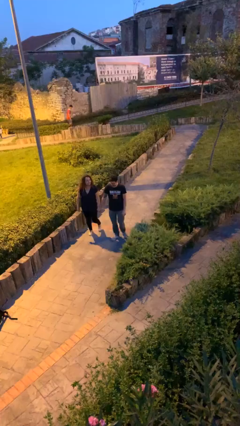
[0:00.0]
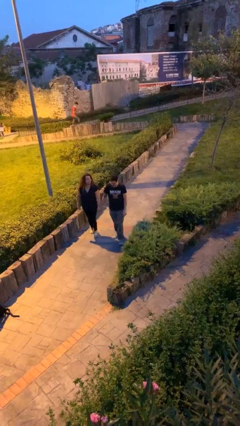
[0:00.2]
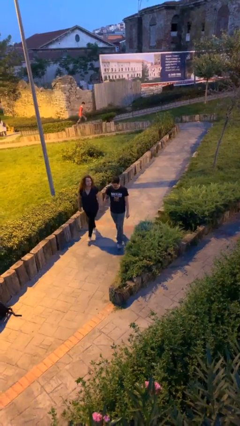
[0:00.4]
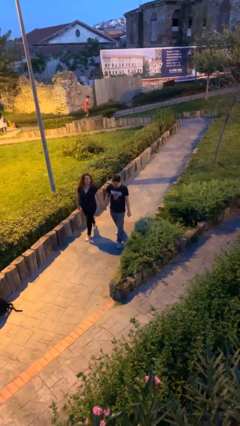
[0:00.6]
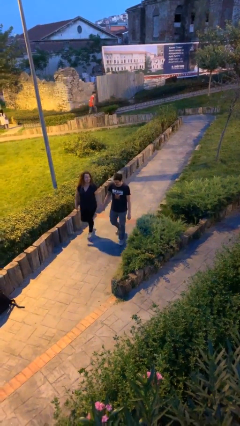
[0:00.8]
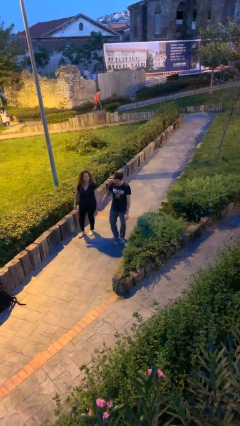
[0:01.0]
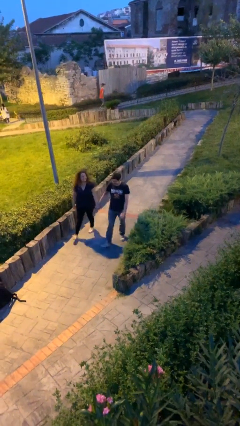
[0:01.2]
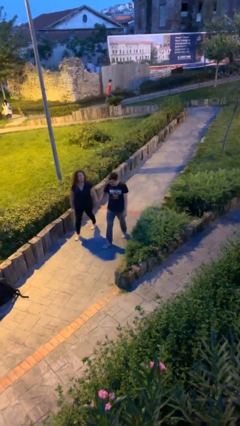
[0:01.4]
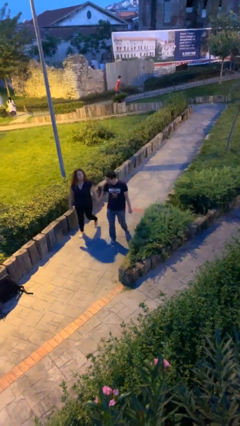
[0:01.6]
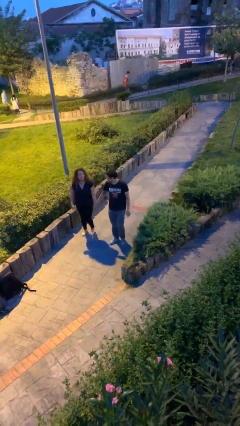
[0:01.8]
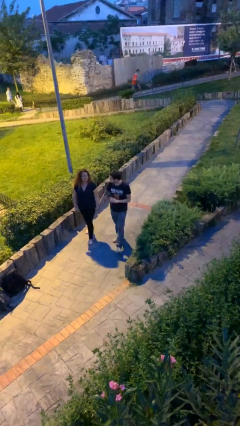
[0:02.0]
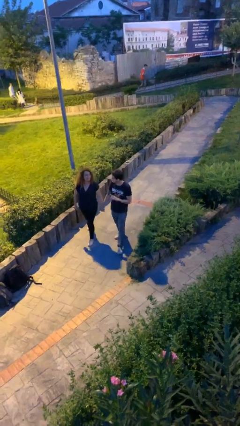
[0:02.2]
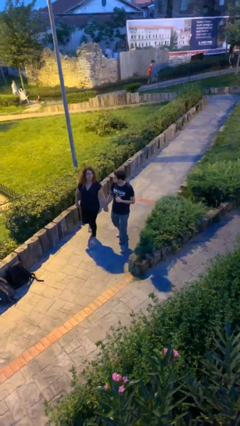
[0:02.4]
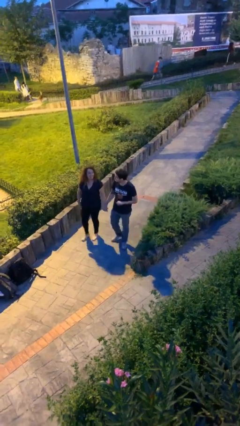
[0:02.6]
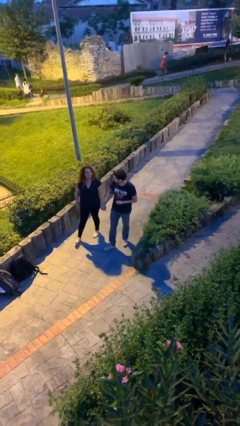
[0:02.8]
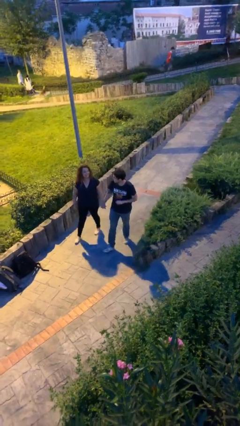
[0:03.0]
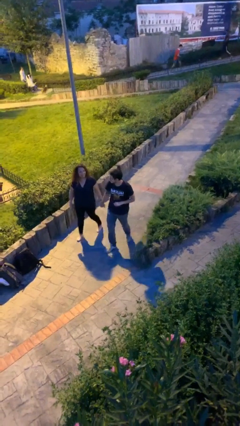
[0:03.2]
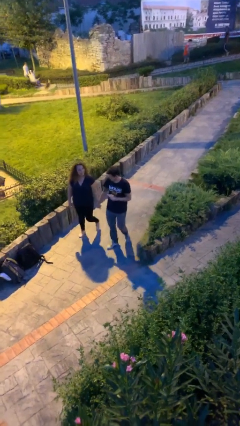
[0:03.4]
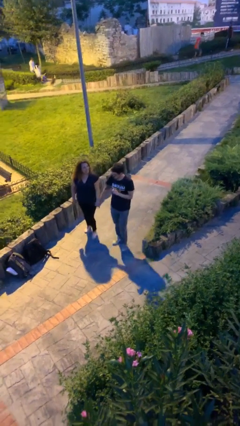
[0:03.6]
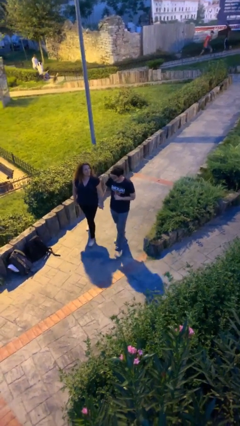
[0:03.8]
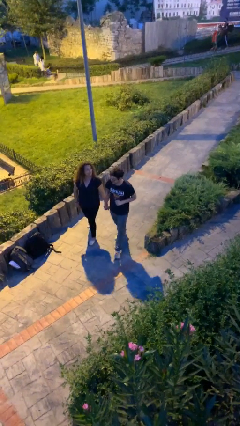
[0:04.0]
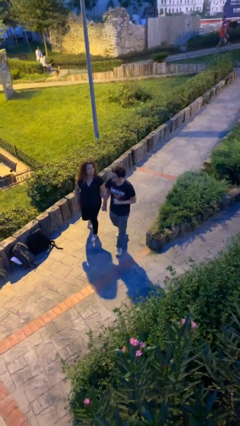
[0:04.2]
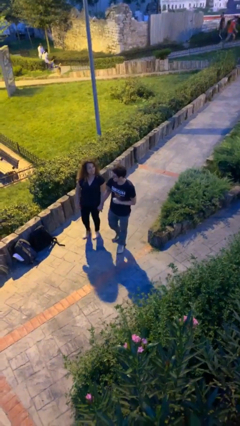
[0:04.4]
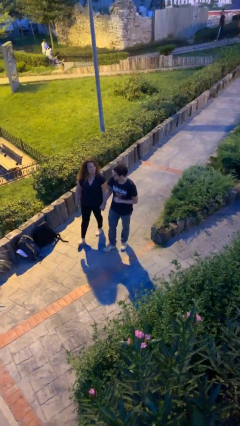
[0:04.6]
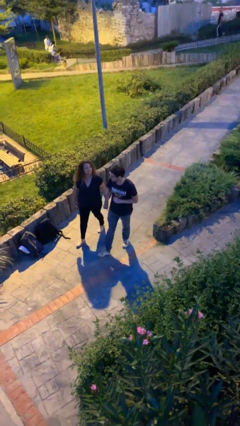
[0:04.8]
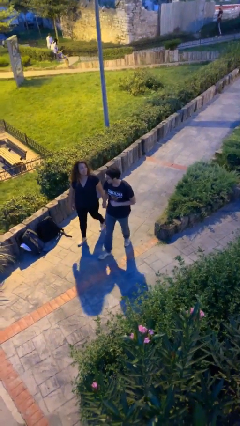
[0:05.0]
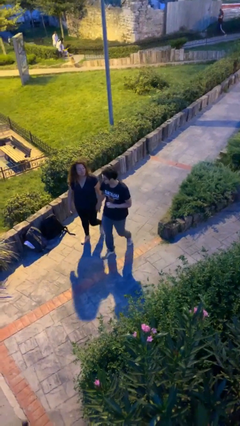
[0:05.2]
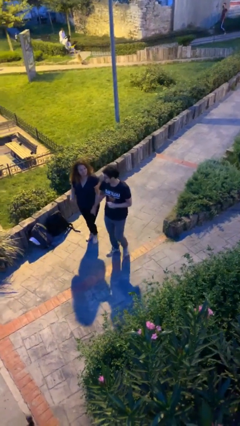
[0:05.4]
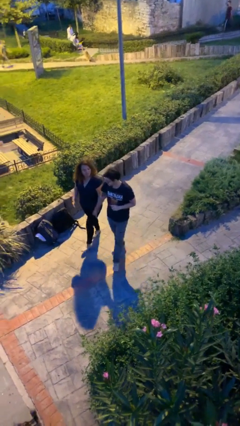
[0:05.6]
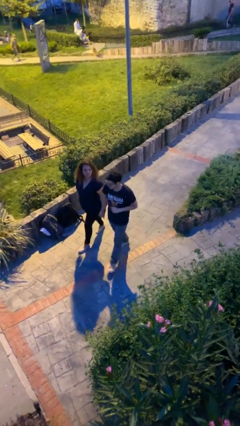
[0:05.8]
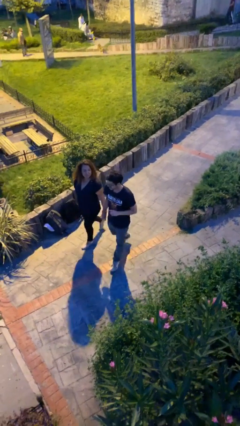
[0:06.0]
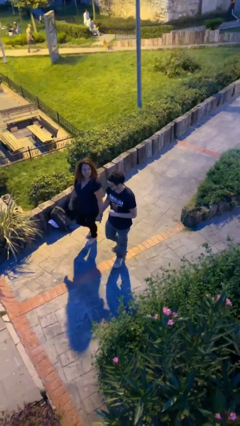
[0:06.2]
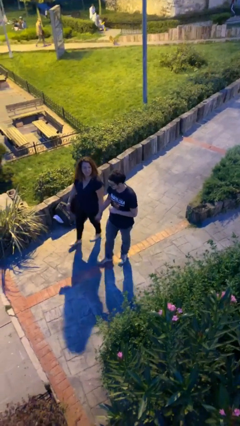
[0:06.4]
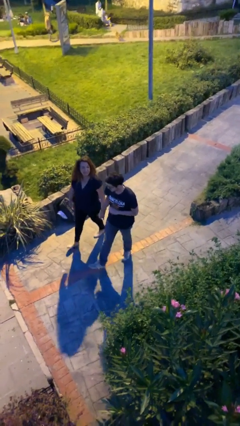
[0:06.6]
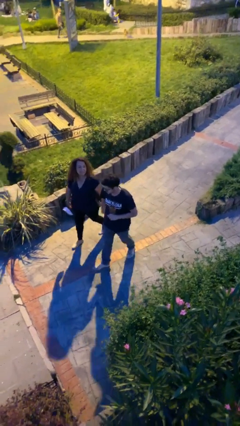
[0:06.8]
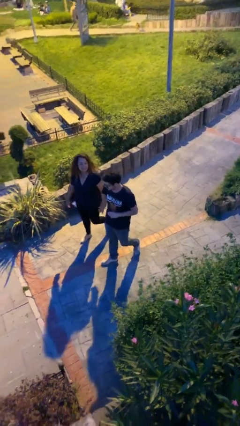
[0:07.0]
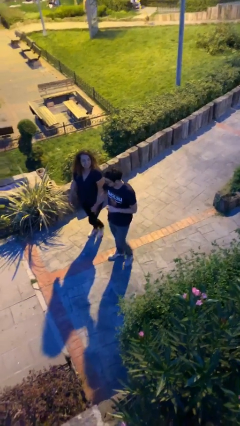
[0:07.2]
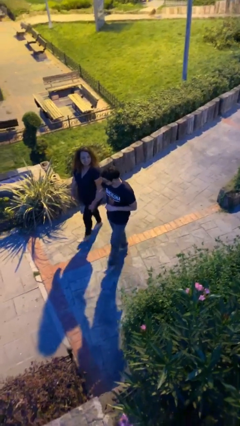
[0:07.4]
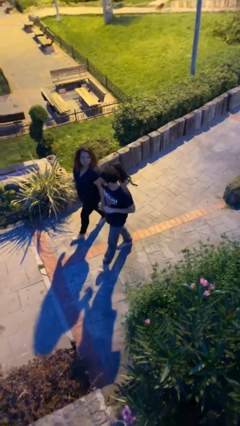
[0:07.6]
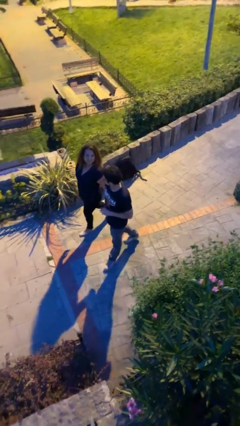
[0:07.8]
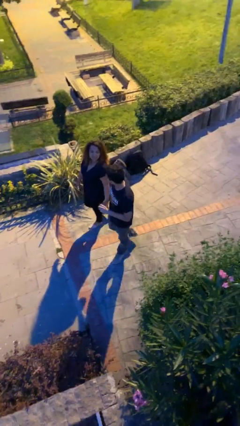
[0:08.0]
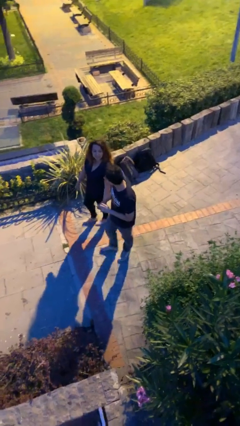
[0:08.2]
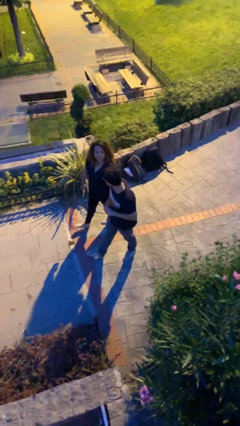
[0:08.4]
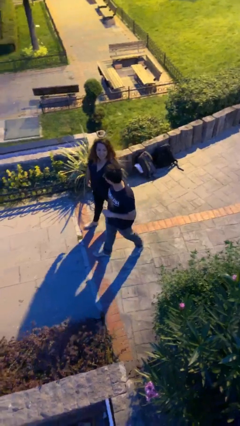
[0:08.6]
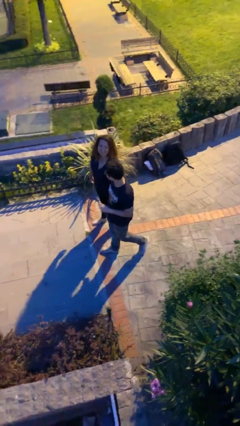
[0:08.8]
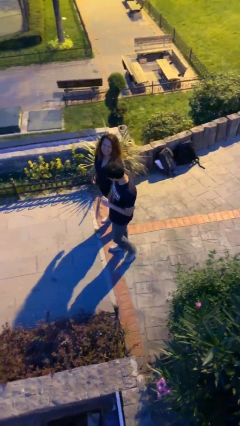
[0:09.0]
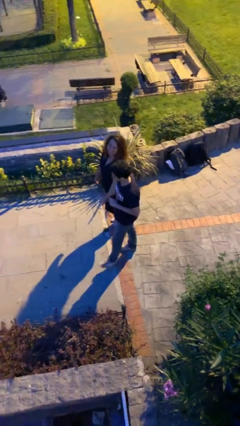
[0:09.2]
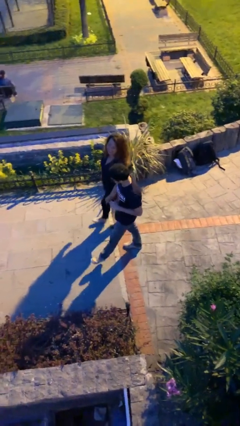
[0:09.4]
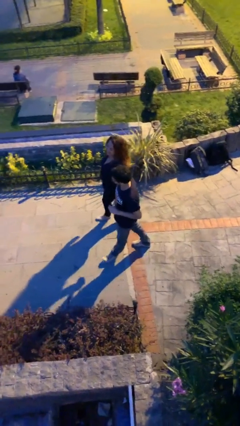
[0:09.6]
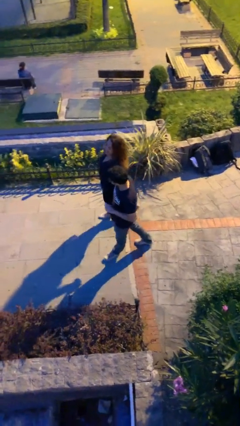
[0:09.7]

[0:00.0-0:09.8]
person holds hand

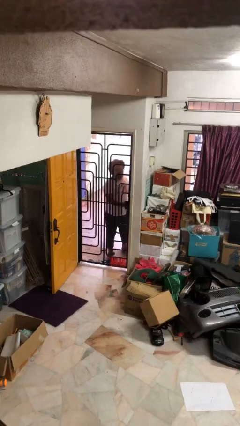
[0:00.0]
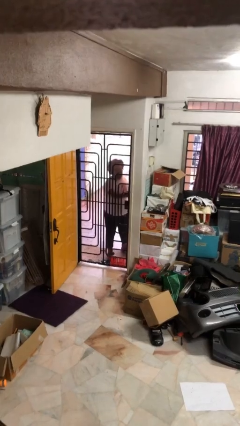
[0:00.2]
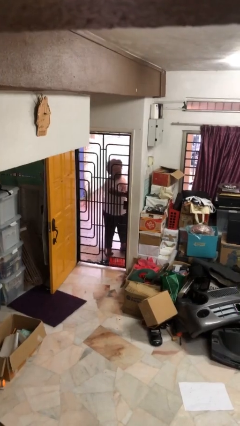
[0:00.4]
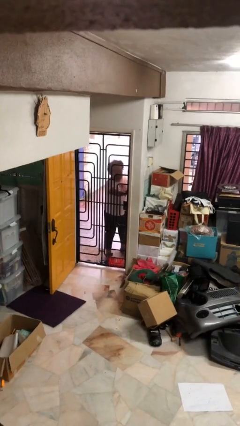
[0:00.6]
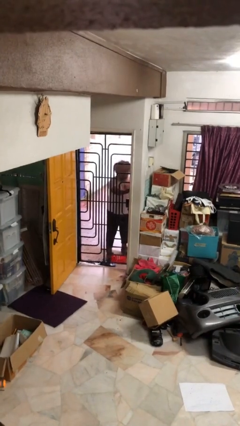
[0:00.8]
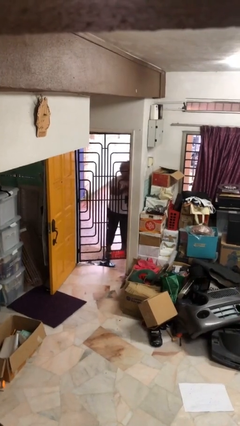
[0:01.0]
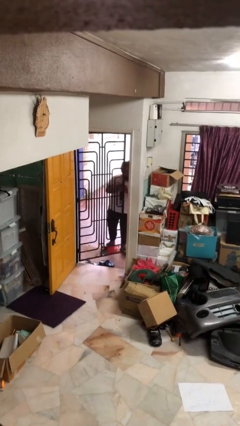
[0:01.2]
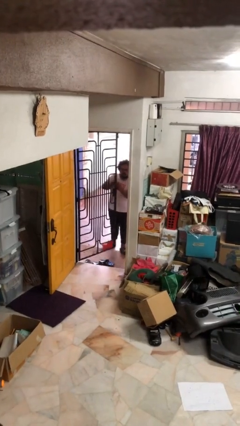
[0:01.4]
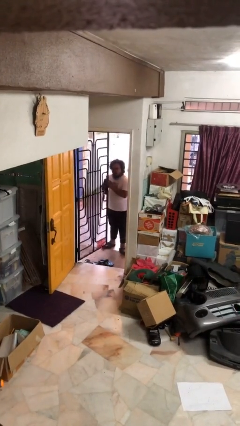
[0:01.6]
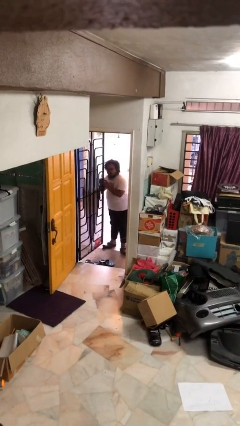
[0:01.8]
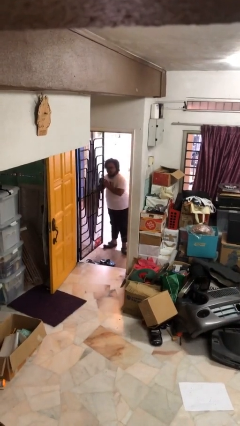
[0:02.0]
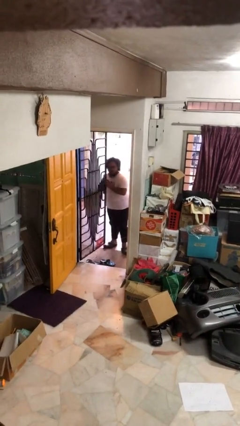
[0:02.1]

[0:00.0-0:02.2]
person opens facility door

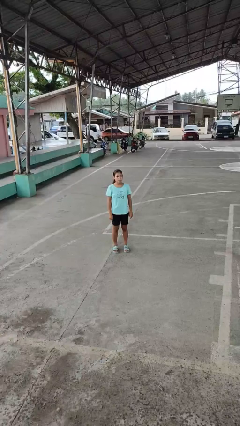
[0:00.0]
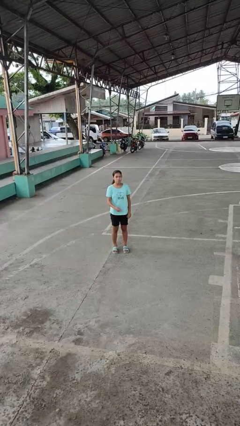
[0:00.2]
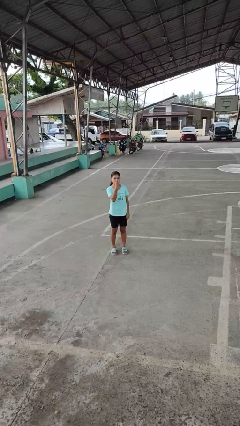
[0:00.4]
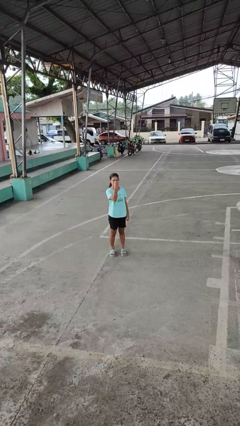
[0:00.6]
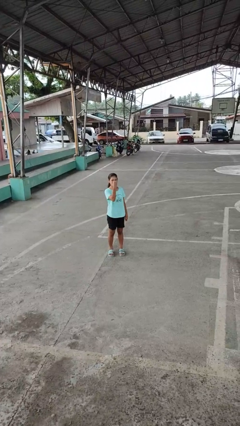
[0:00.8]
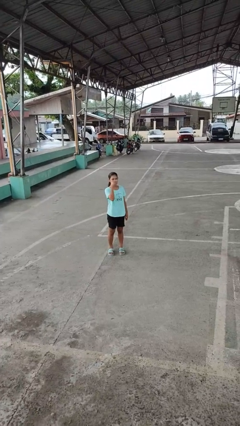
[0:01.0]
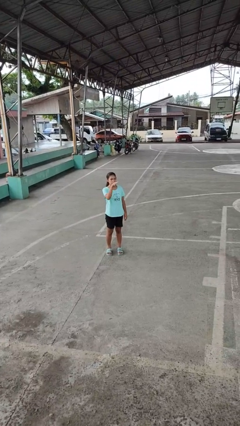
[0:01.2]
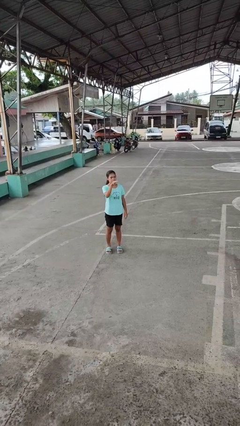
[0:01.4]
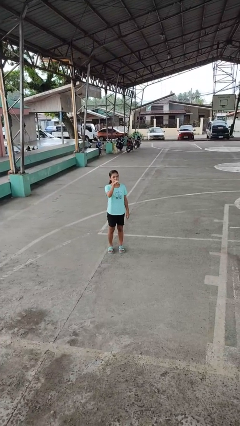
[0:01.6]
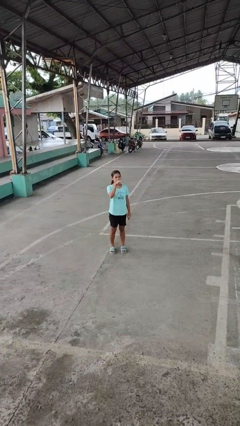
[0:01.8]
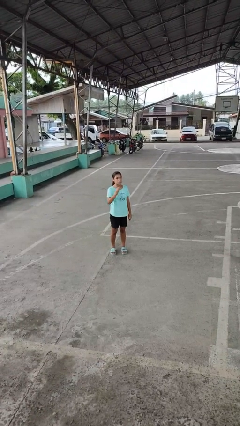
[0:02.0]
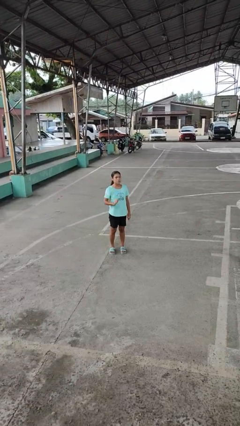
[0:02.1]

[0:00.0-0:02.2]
person gestures watch closely

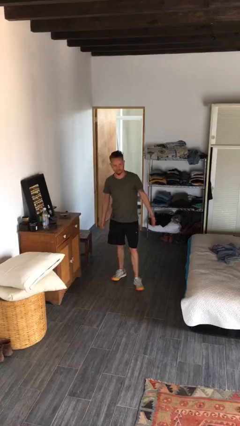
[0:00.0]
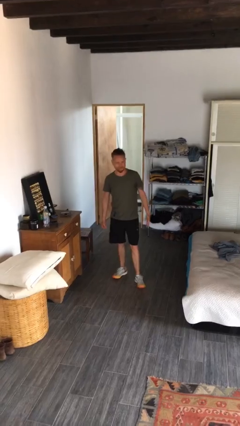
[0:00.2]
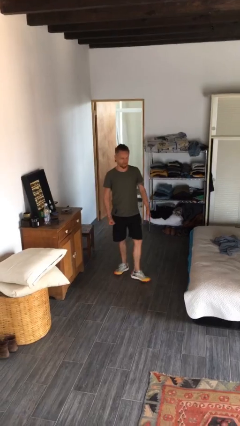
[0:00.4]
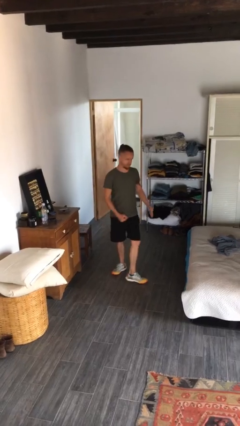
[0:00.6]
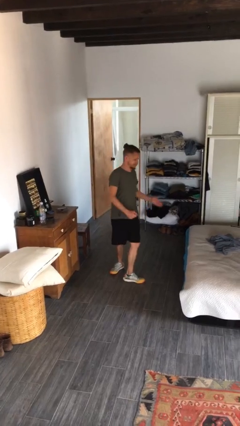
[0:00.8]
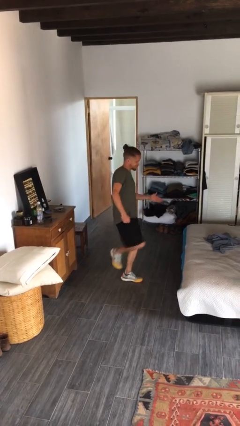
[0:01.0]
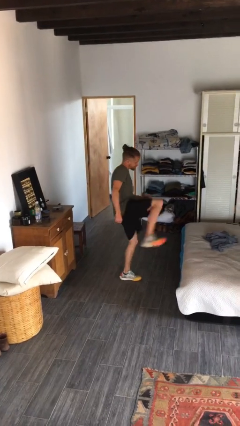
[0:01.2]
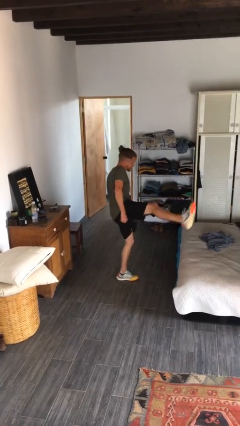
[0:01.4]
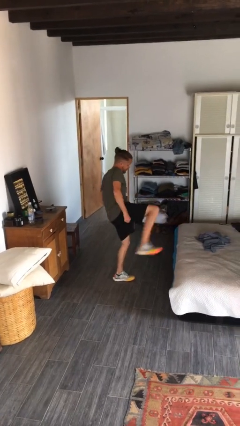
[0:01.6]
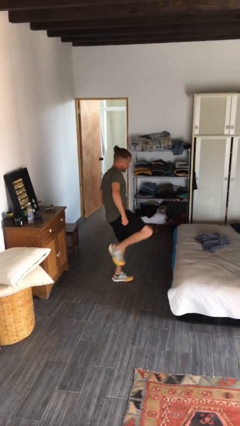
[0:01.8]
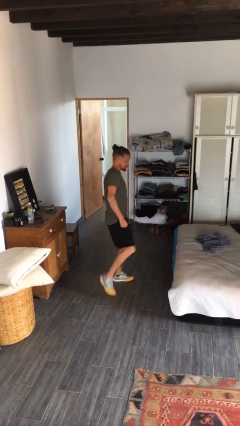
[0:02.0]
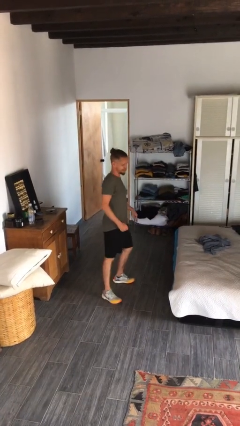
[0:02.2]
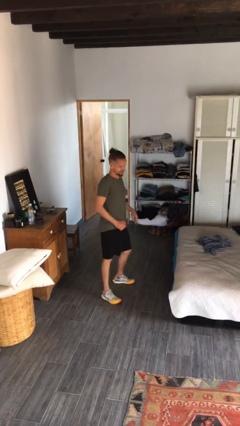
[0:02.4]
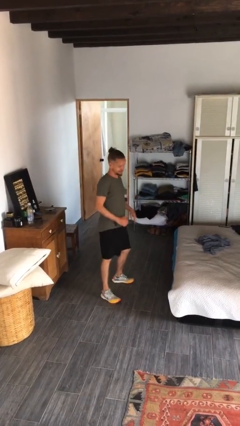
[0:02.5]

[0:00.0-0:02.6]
person karate kicks

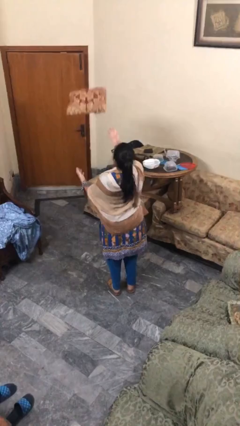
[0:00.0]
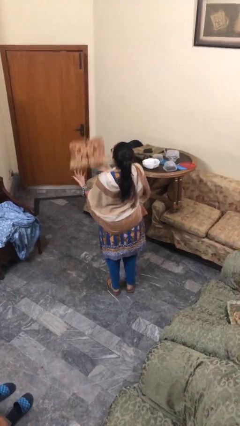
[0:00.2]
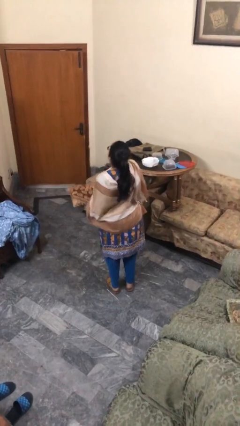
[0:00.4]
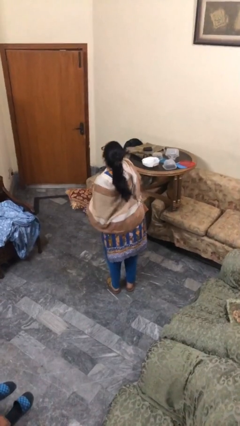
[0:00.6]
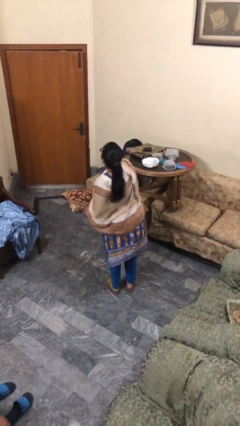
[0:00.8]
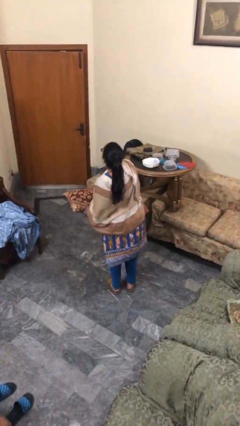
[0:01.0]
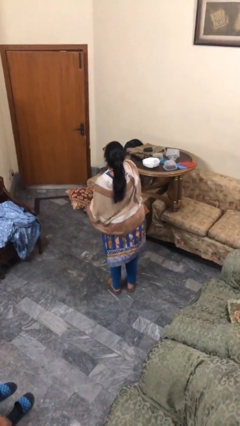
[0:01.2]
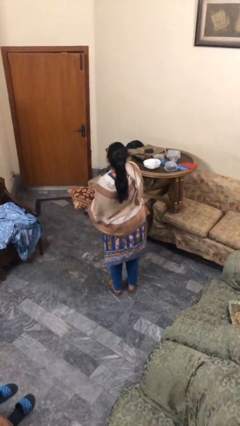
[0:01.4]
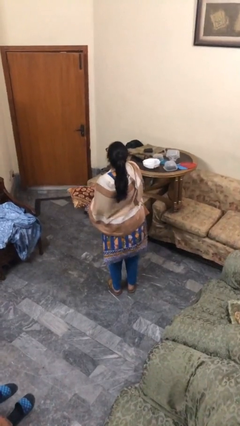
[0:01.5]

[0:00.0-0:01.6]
person catches dropped object
